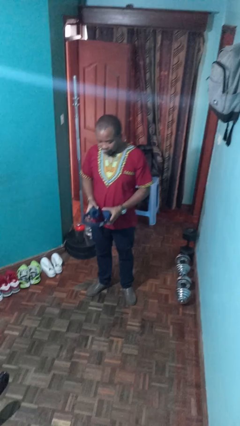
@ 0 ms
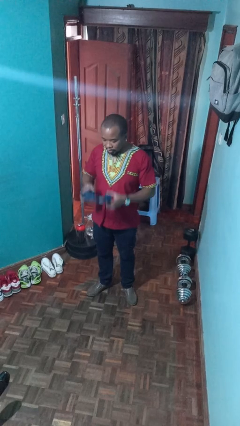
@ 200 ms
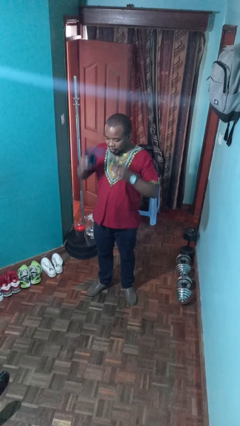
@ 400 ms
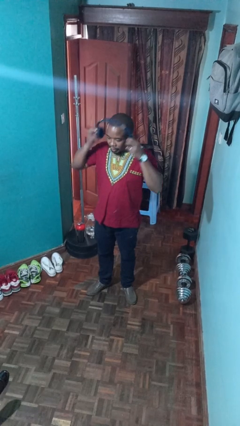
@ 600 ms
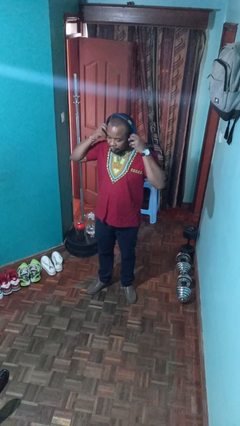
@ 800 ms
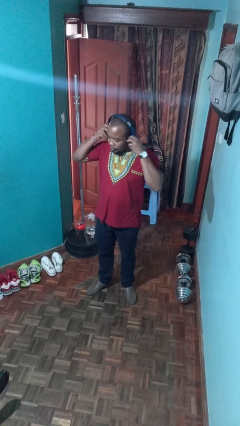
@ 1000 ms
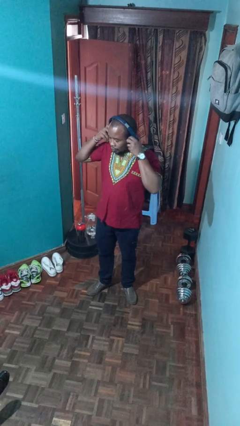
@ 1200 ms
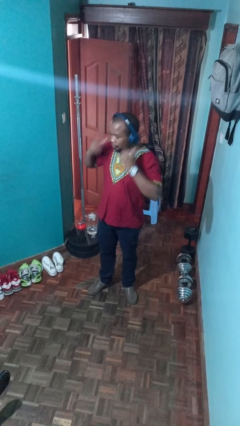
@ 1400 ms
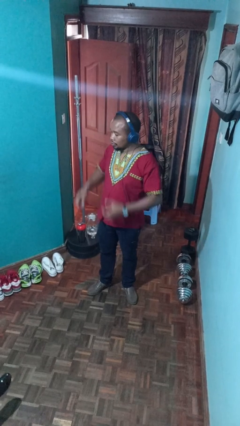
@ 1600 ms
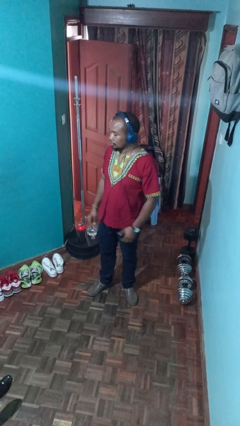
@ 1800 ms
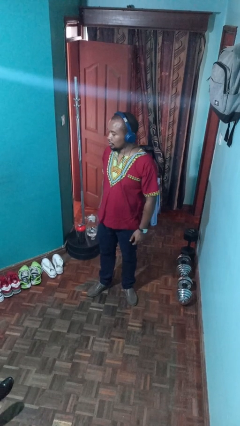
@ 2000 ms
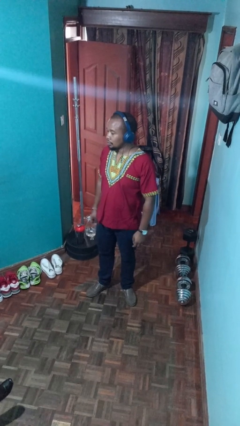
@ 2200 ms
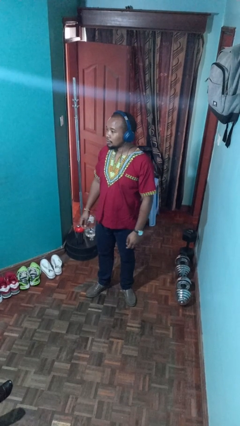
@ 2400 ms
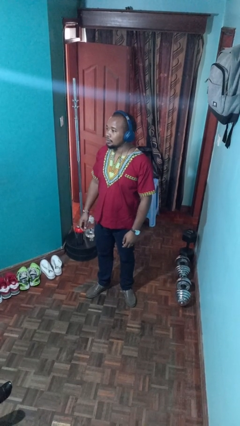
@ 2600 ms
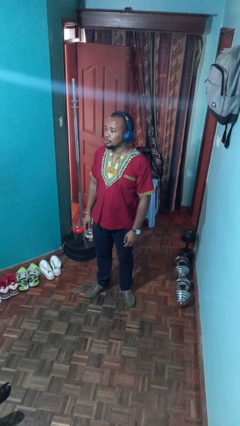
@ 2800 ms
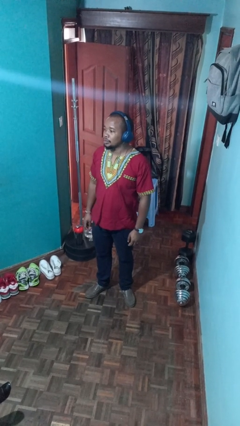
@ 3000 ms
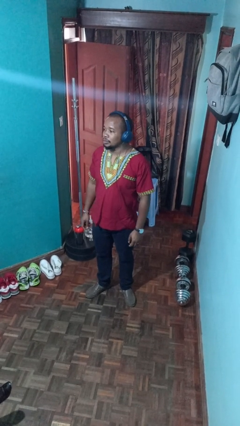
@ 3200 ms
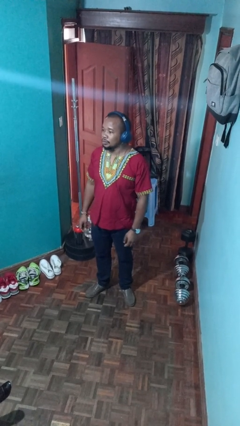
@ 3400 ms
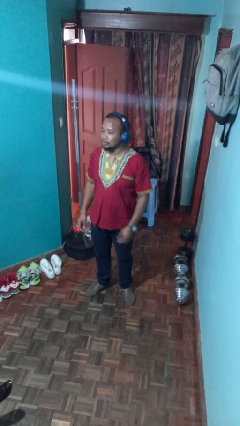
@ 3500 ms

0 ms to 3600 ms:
person puts on headphones

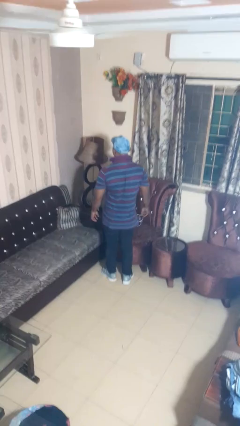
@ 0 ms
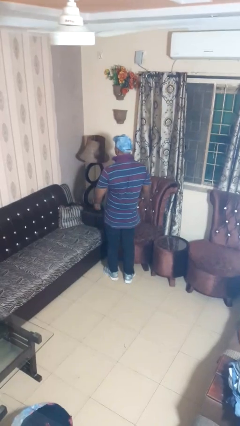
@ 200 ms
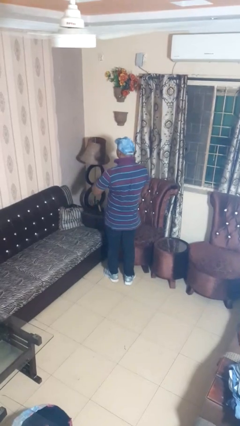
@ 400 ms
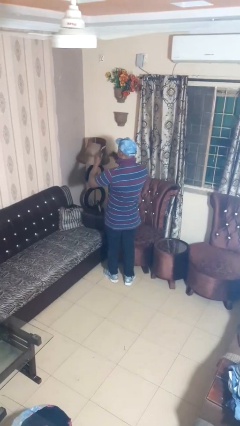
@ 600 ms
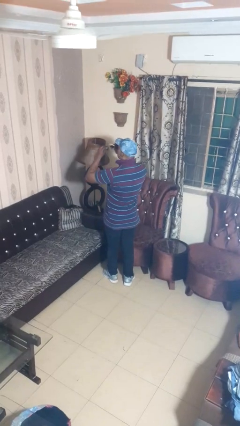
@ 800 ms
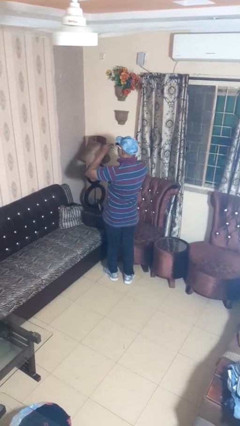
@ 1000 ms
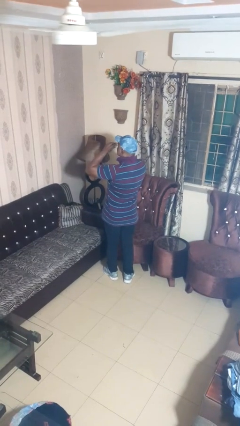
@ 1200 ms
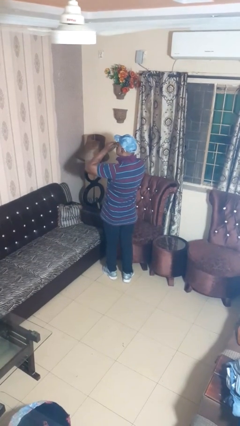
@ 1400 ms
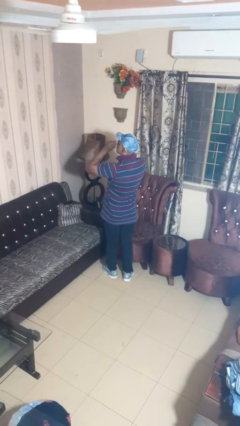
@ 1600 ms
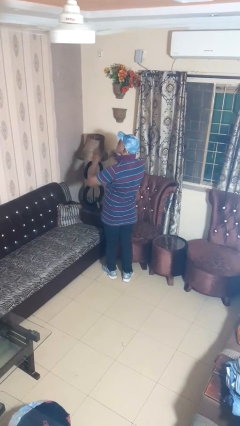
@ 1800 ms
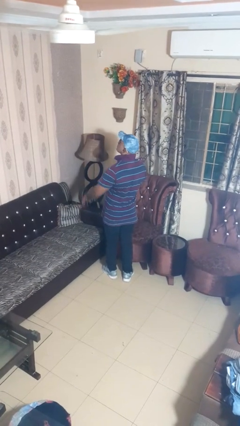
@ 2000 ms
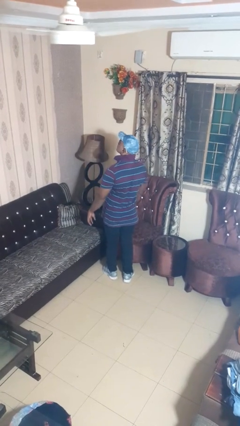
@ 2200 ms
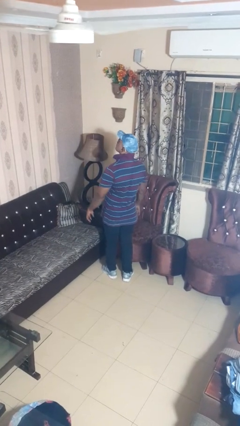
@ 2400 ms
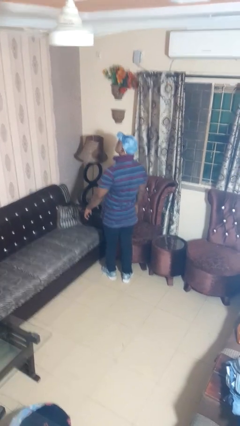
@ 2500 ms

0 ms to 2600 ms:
person puts on sunglasses

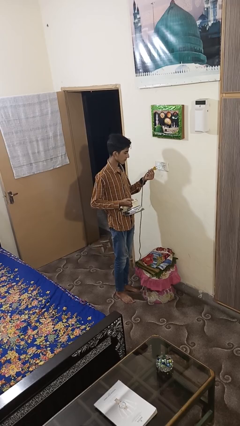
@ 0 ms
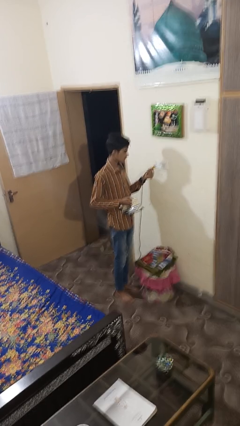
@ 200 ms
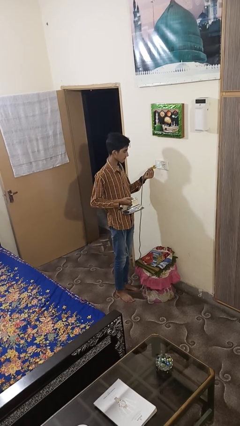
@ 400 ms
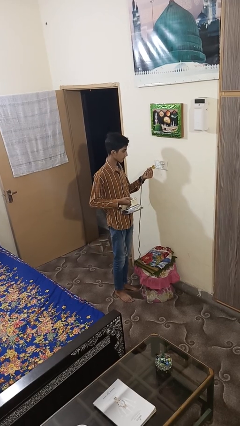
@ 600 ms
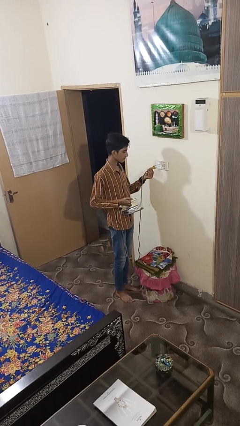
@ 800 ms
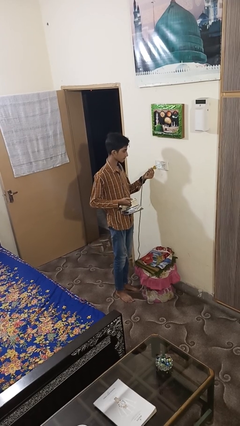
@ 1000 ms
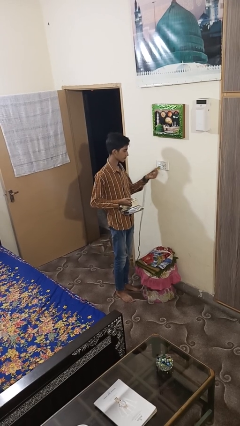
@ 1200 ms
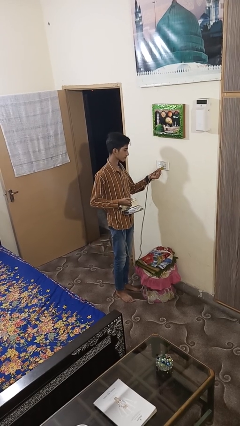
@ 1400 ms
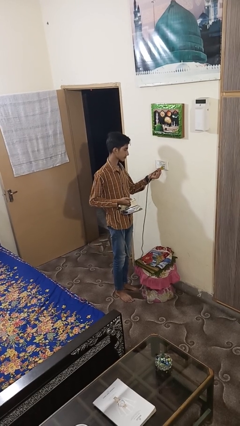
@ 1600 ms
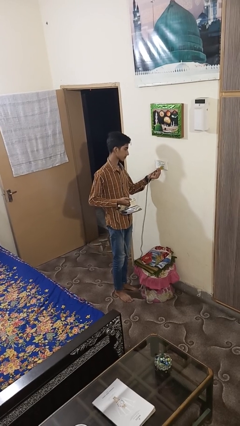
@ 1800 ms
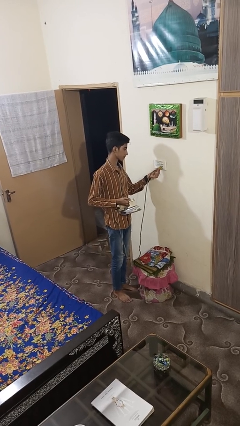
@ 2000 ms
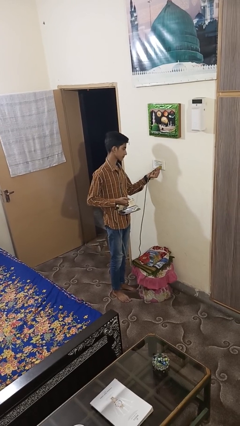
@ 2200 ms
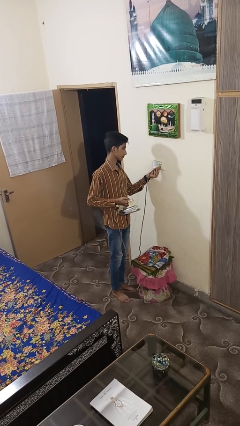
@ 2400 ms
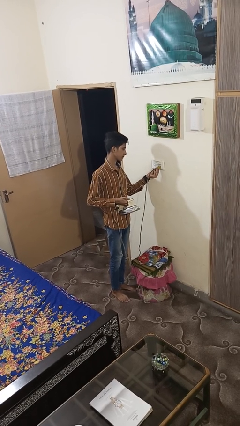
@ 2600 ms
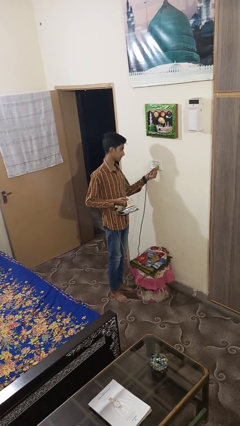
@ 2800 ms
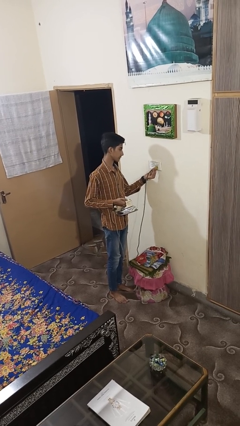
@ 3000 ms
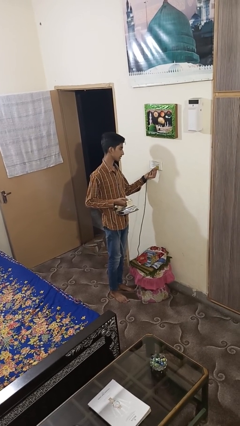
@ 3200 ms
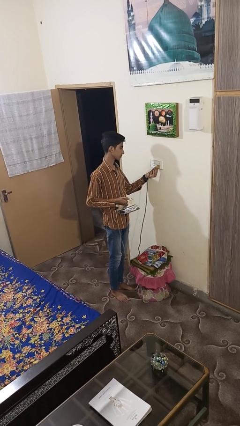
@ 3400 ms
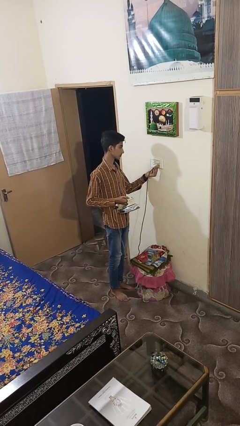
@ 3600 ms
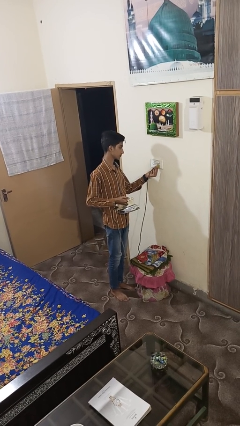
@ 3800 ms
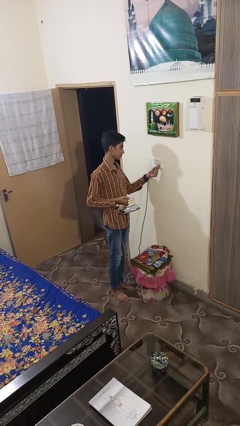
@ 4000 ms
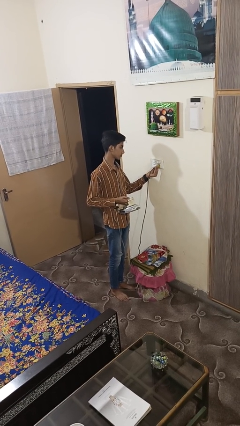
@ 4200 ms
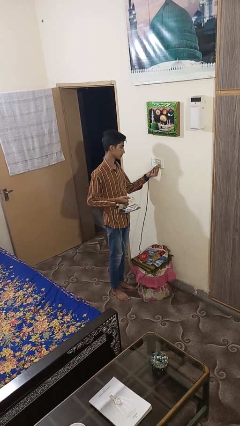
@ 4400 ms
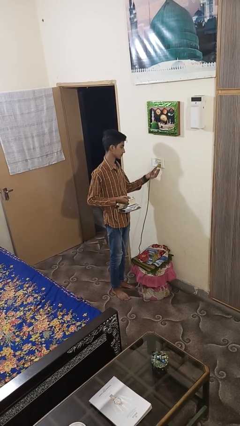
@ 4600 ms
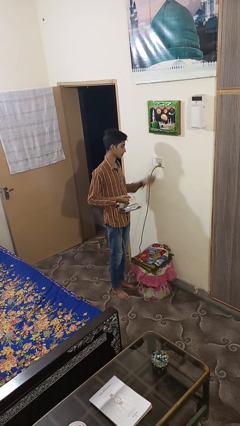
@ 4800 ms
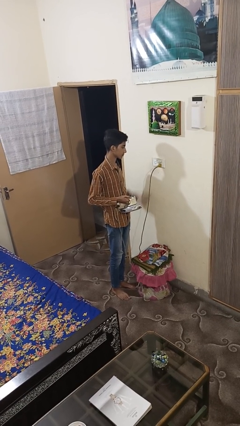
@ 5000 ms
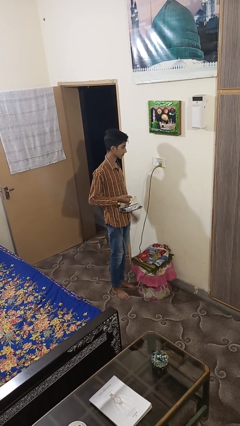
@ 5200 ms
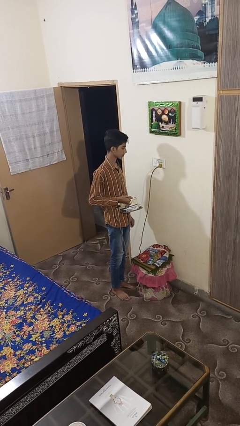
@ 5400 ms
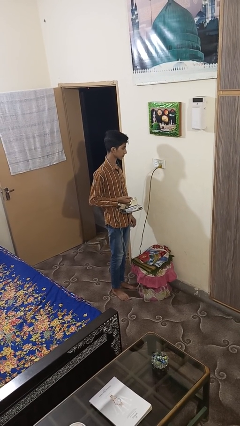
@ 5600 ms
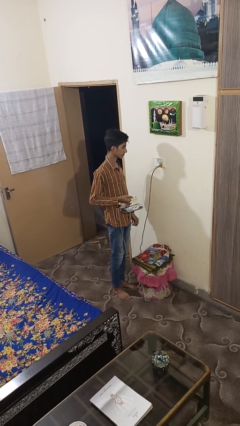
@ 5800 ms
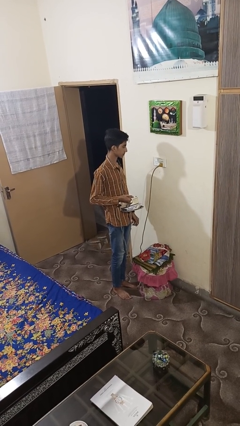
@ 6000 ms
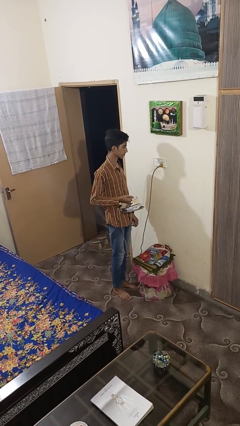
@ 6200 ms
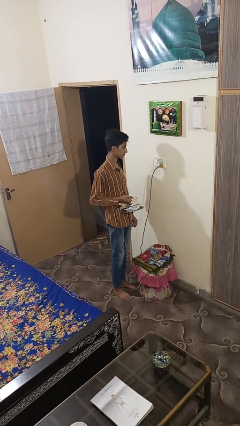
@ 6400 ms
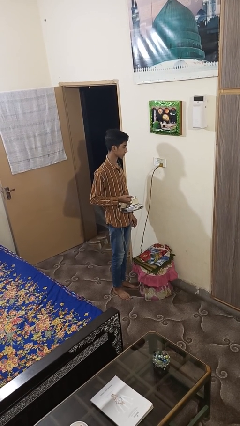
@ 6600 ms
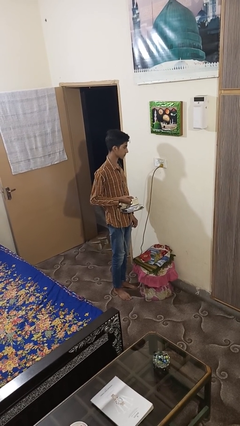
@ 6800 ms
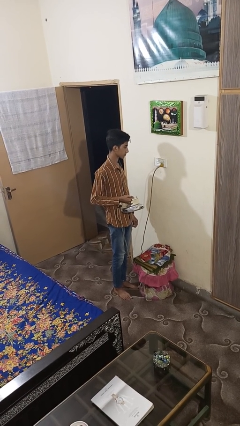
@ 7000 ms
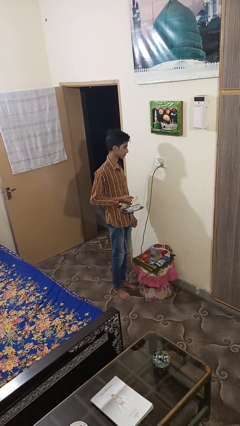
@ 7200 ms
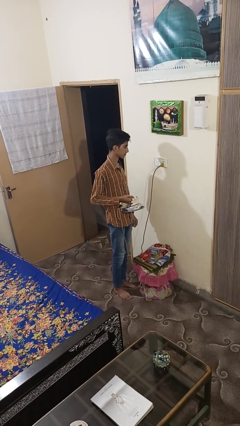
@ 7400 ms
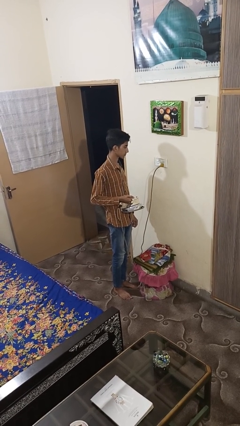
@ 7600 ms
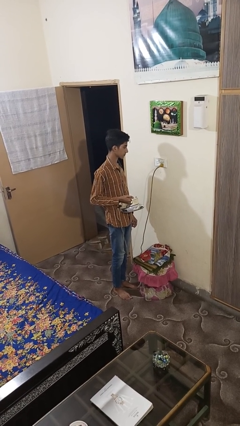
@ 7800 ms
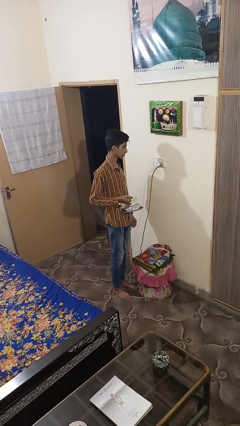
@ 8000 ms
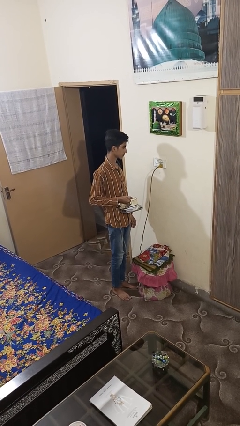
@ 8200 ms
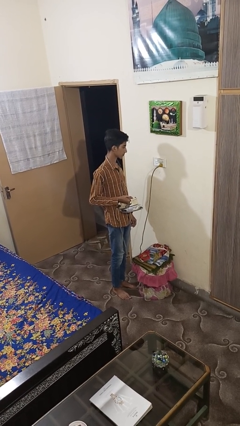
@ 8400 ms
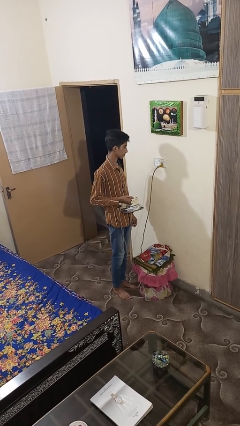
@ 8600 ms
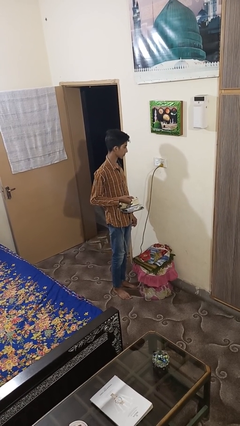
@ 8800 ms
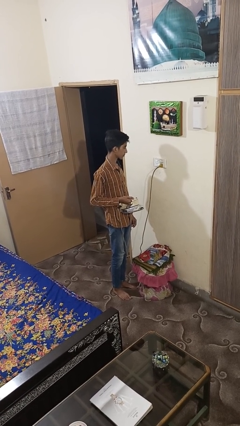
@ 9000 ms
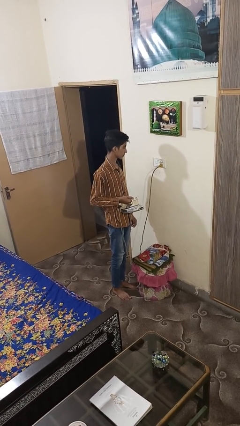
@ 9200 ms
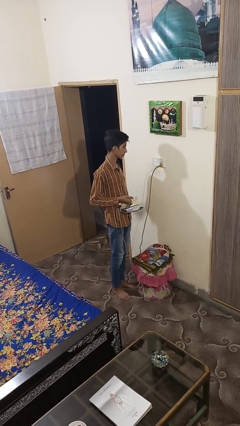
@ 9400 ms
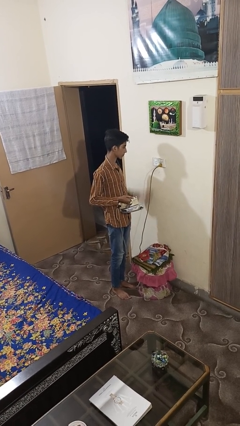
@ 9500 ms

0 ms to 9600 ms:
person plugs into electrical socket

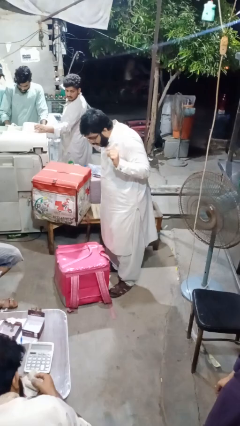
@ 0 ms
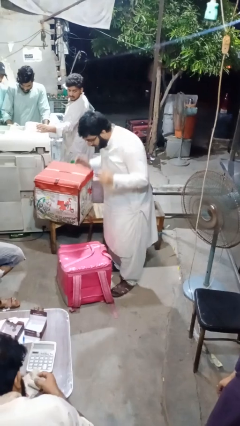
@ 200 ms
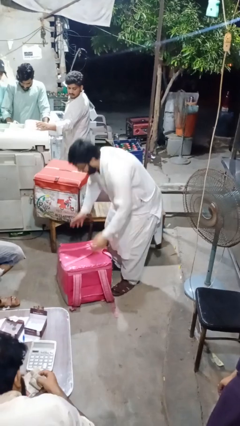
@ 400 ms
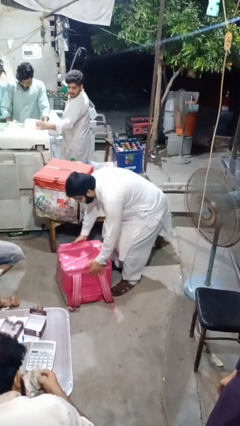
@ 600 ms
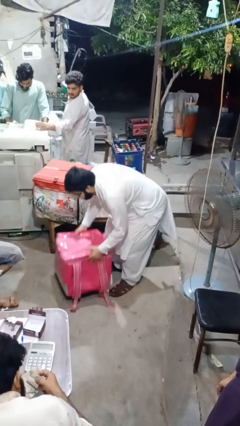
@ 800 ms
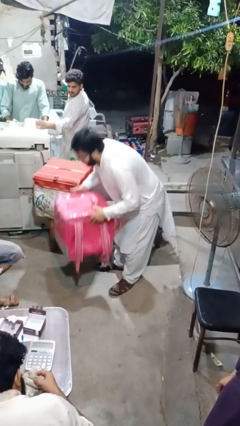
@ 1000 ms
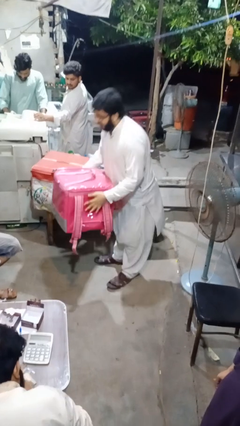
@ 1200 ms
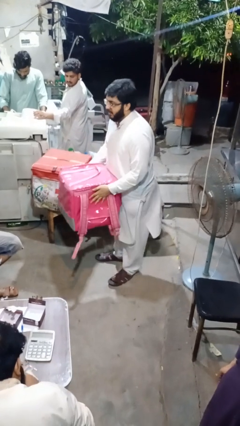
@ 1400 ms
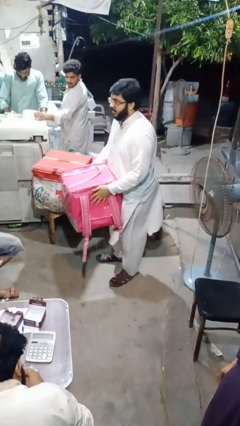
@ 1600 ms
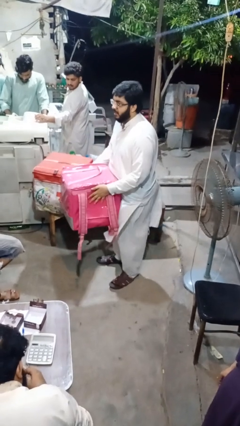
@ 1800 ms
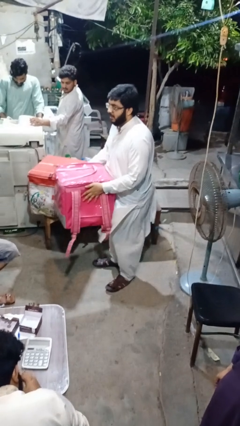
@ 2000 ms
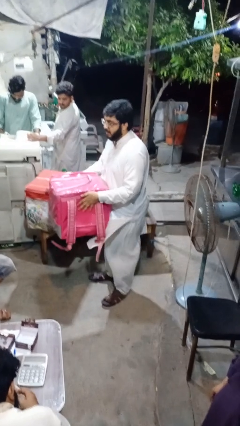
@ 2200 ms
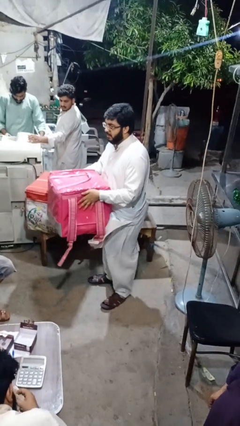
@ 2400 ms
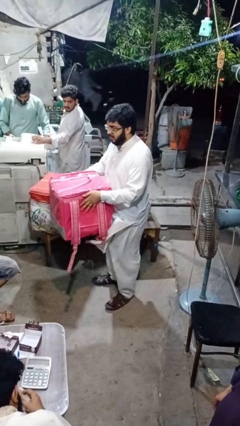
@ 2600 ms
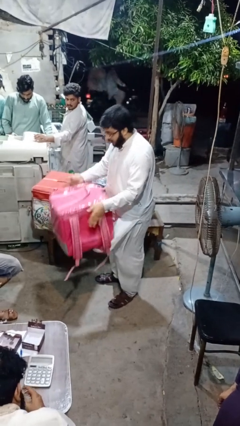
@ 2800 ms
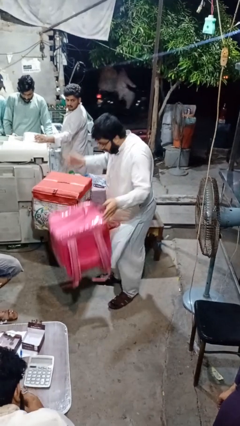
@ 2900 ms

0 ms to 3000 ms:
person picks up object from floor
